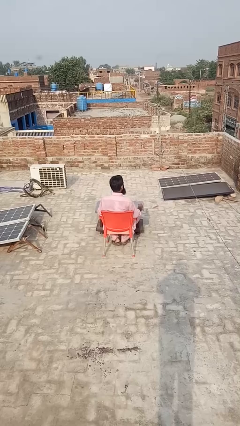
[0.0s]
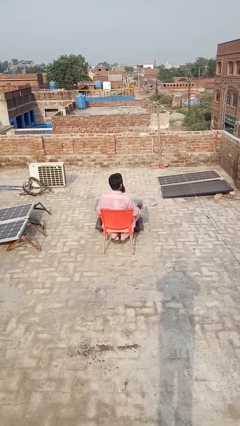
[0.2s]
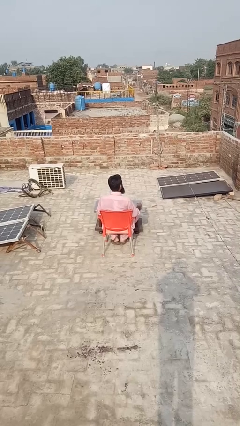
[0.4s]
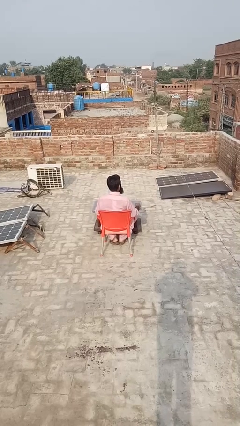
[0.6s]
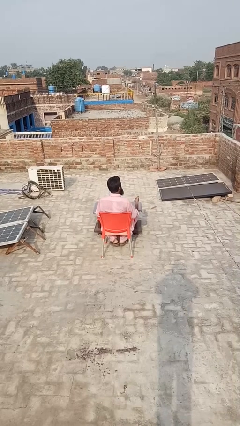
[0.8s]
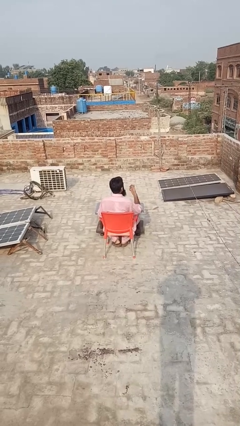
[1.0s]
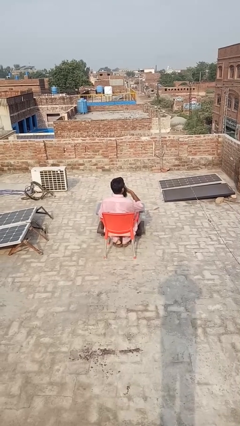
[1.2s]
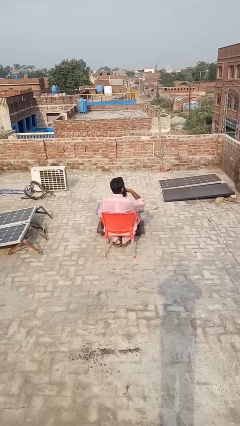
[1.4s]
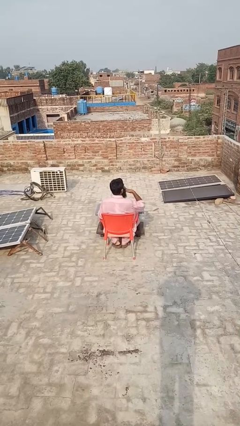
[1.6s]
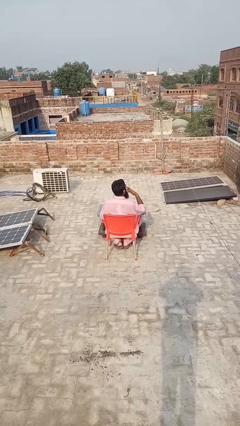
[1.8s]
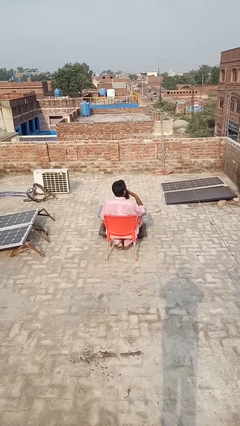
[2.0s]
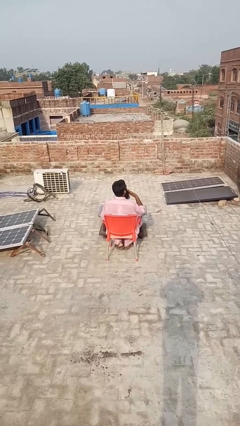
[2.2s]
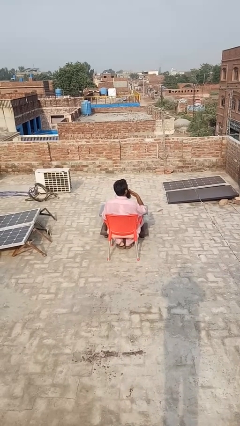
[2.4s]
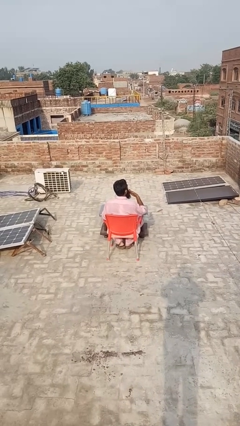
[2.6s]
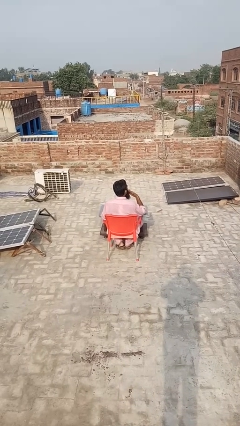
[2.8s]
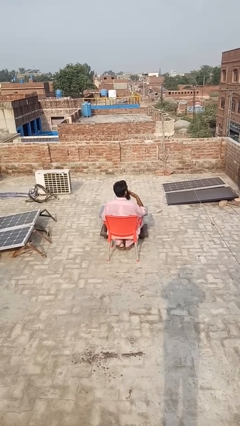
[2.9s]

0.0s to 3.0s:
person licks fingers

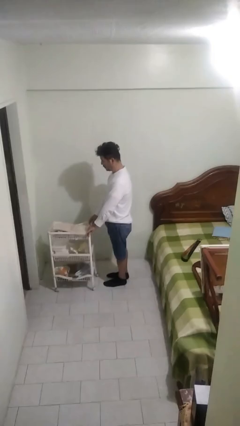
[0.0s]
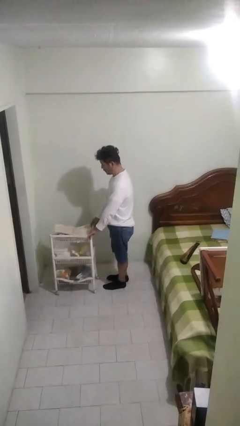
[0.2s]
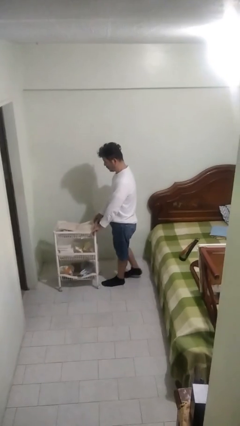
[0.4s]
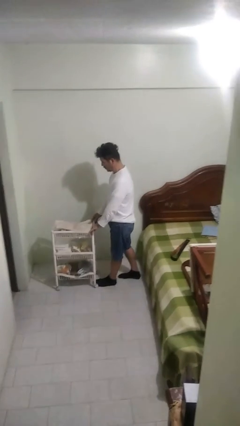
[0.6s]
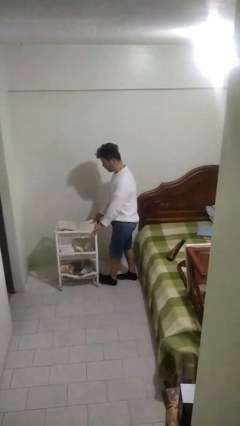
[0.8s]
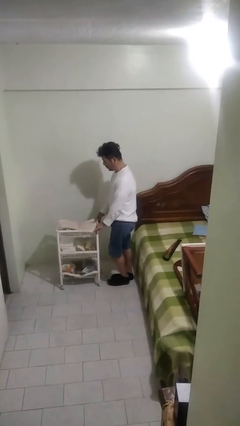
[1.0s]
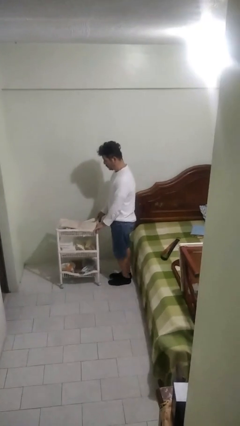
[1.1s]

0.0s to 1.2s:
person pulls wheeled cart

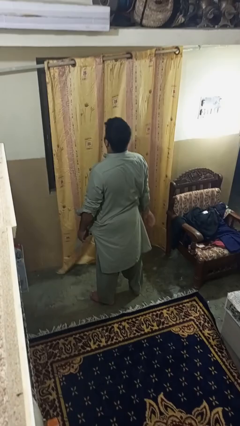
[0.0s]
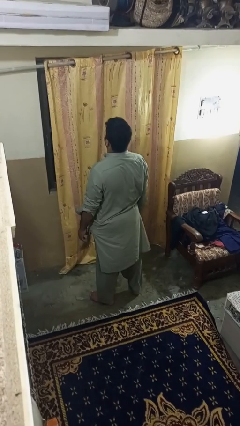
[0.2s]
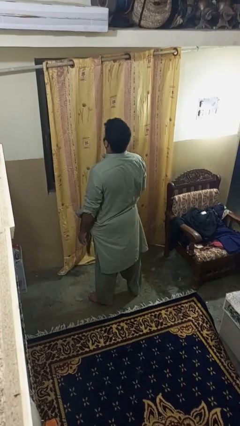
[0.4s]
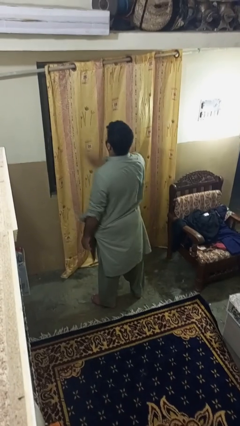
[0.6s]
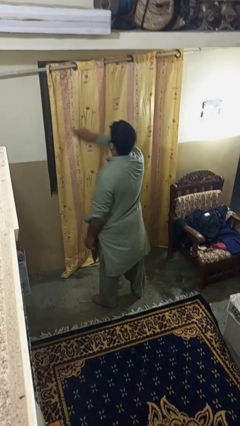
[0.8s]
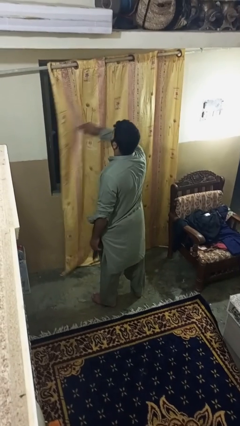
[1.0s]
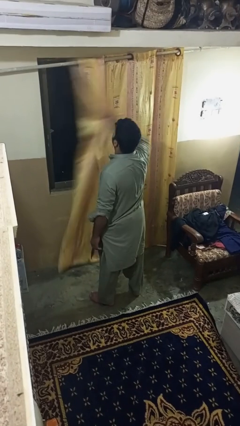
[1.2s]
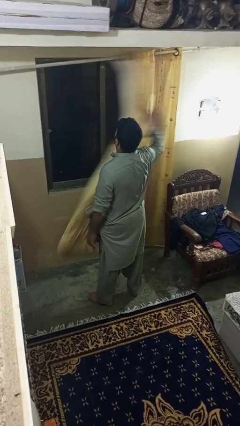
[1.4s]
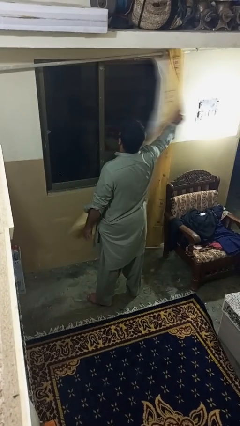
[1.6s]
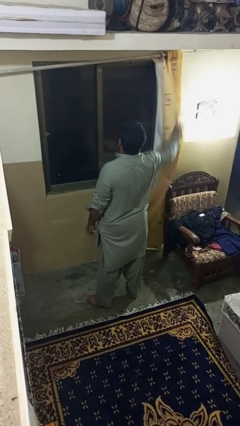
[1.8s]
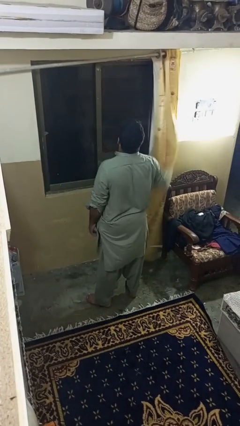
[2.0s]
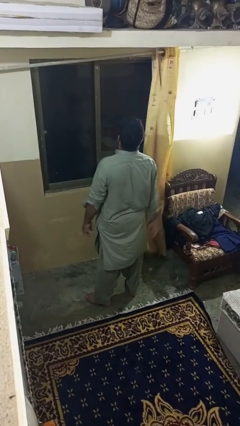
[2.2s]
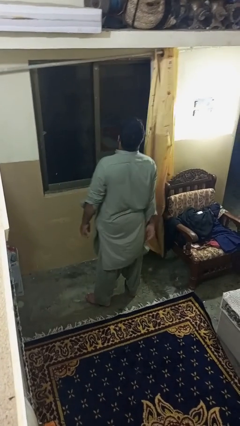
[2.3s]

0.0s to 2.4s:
person opens curtains

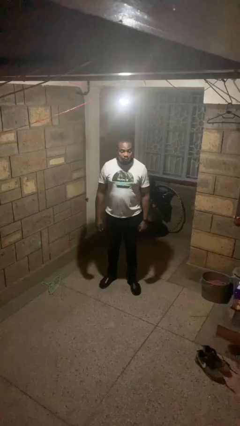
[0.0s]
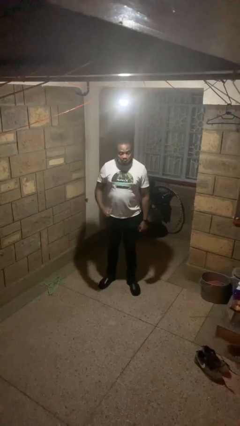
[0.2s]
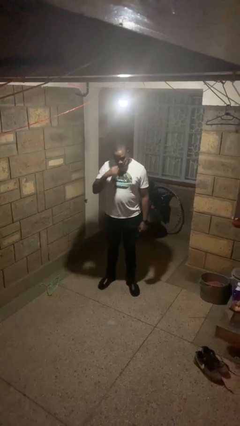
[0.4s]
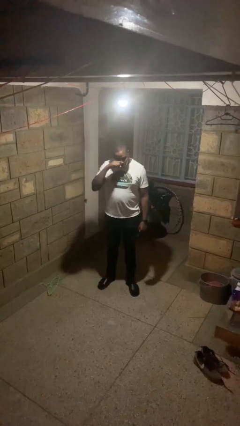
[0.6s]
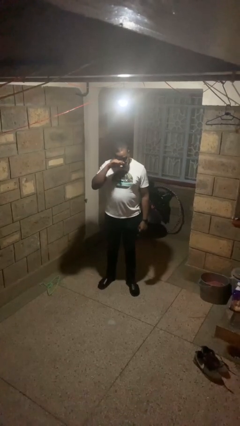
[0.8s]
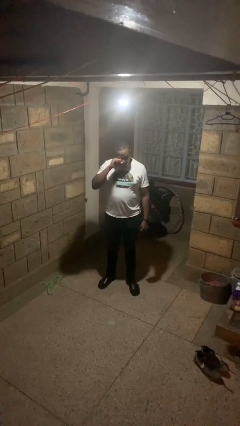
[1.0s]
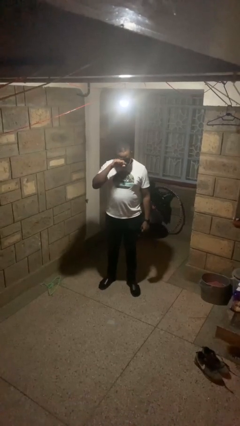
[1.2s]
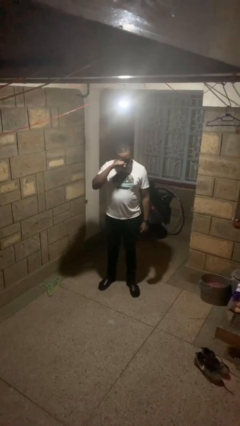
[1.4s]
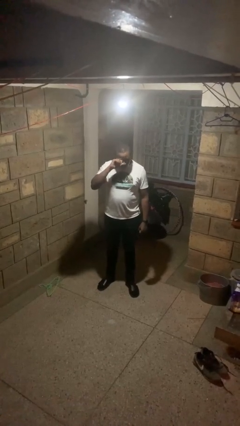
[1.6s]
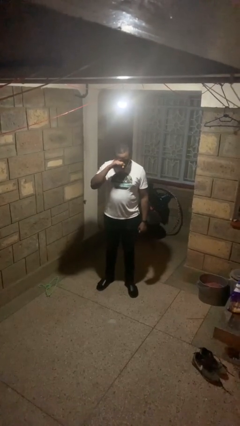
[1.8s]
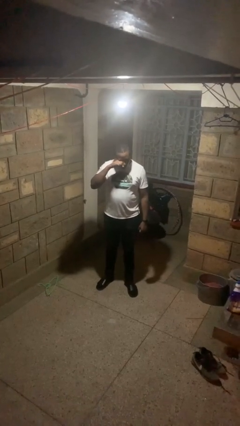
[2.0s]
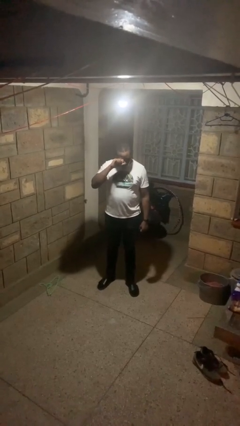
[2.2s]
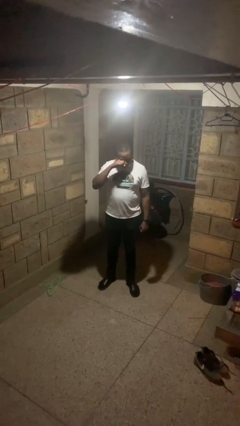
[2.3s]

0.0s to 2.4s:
person rubs eyes

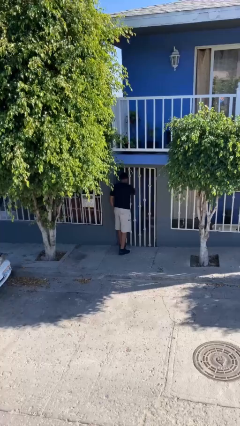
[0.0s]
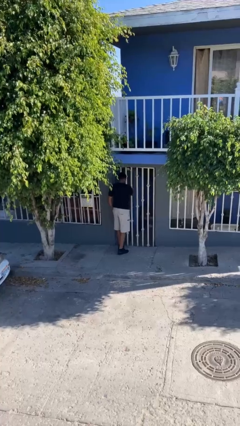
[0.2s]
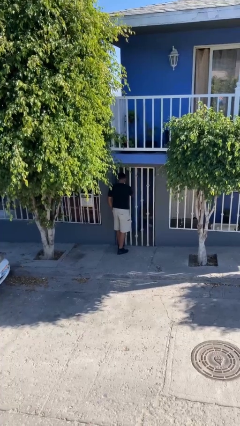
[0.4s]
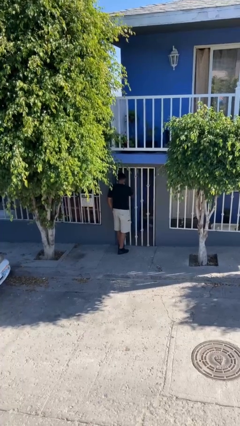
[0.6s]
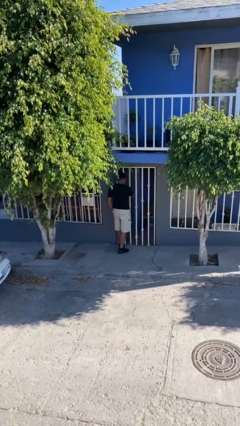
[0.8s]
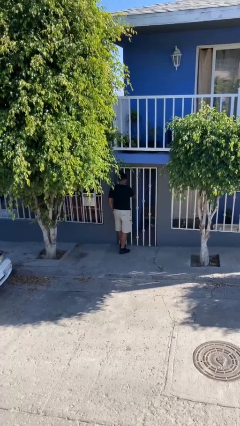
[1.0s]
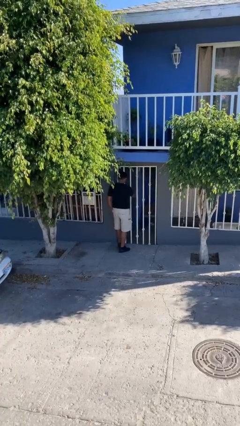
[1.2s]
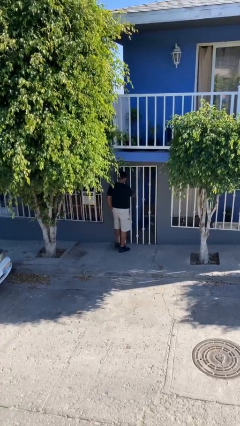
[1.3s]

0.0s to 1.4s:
person closes facility door

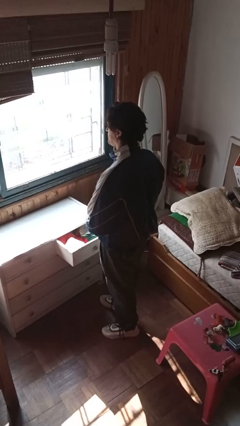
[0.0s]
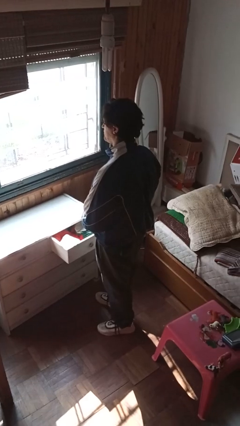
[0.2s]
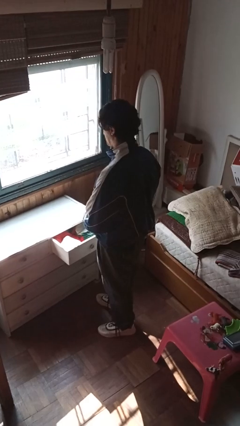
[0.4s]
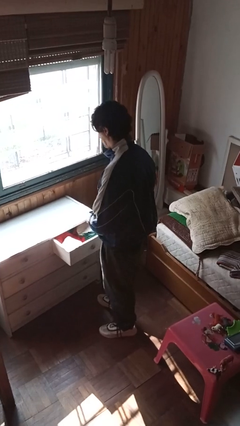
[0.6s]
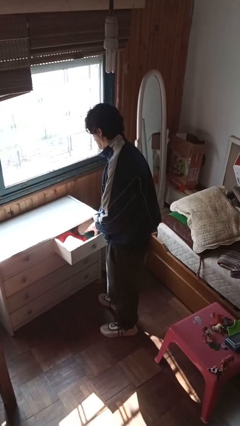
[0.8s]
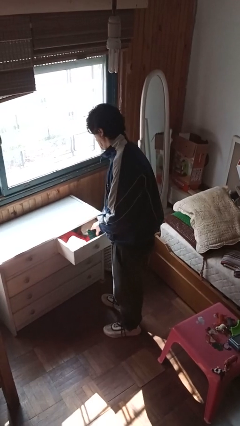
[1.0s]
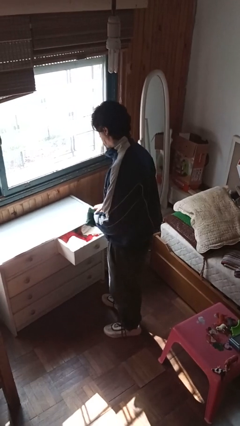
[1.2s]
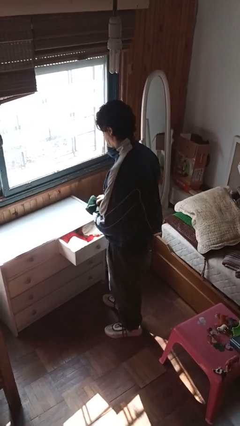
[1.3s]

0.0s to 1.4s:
person takes clothes from dresser

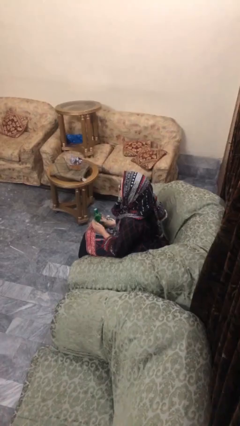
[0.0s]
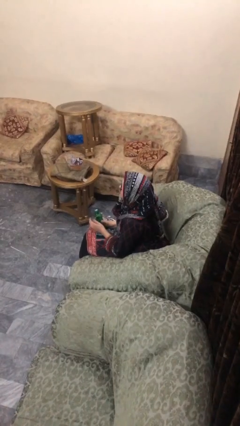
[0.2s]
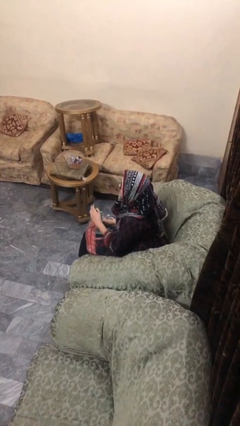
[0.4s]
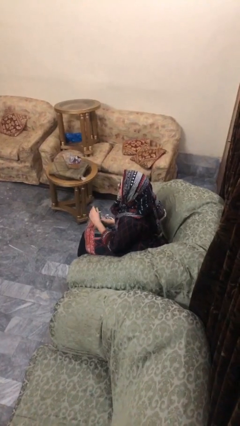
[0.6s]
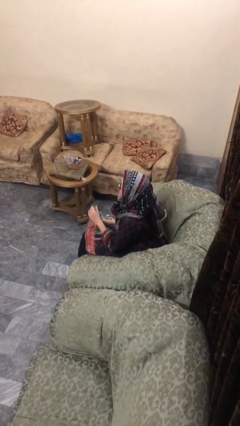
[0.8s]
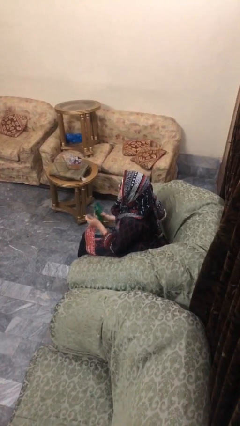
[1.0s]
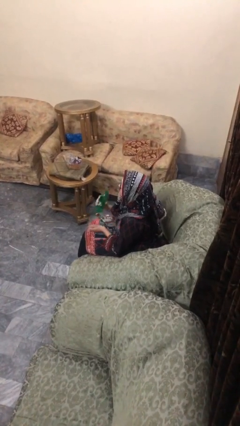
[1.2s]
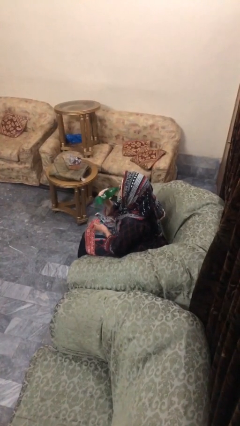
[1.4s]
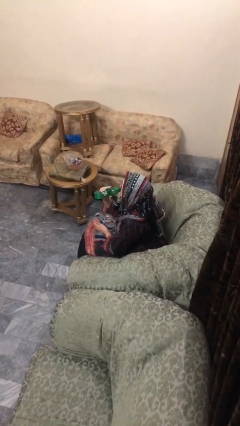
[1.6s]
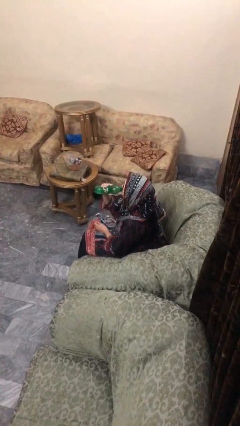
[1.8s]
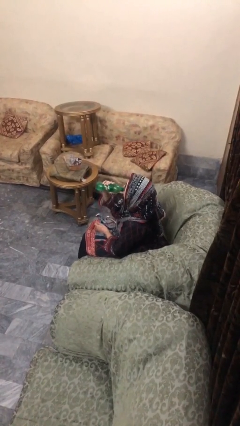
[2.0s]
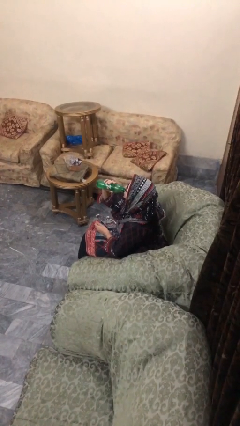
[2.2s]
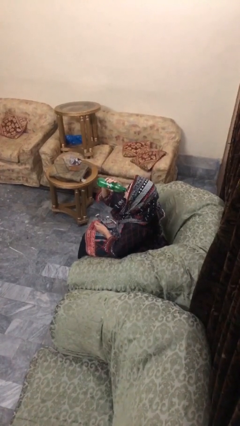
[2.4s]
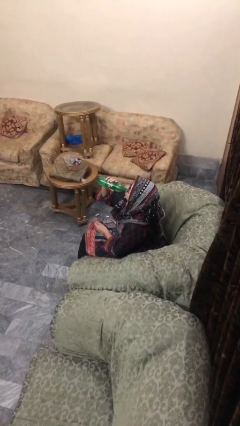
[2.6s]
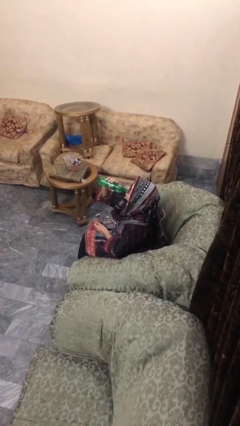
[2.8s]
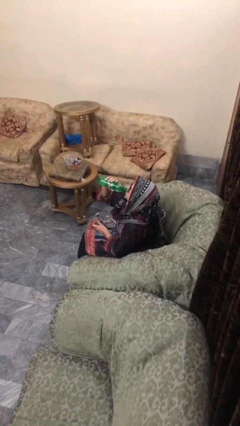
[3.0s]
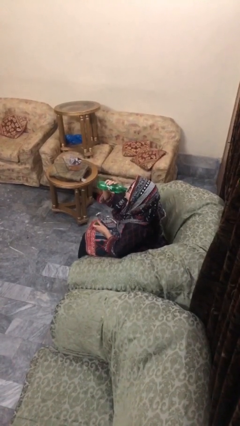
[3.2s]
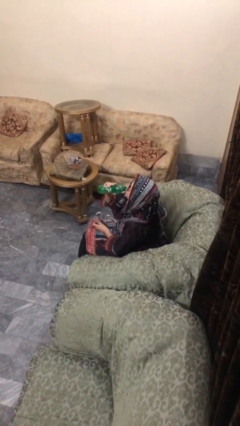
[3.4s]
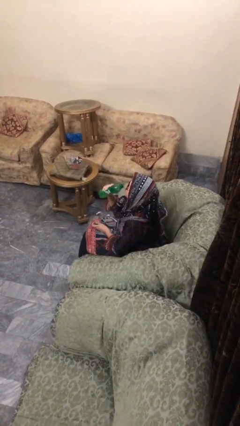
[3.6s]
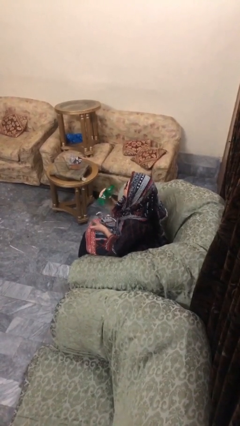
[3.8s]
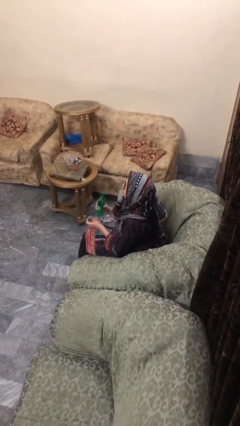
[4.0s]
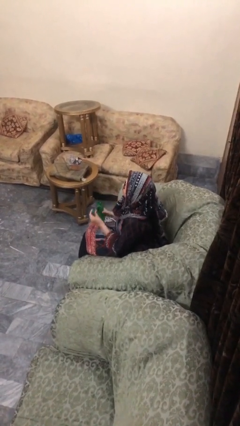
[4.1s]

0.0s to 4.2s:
person drinks from bottle

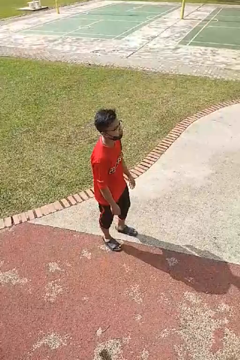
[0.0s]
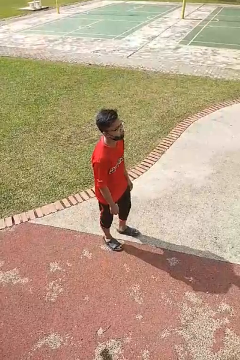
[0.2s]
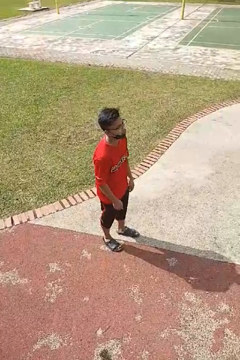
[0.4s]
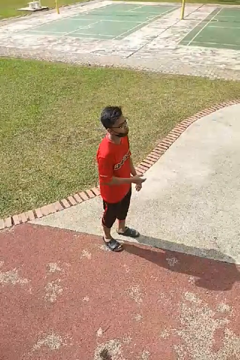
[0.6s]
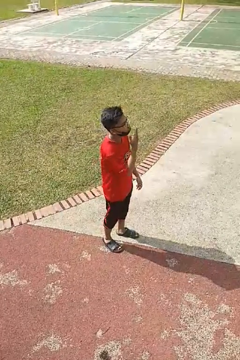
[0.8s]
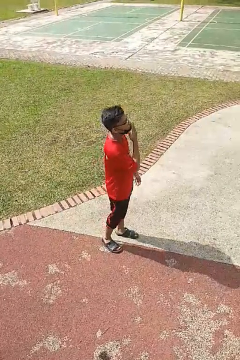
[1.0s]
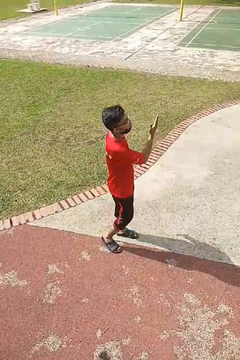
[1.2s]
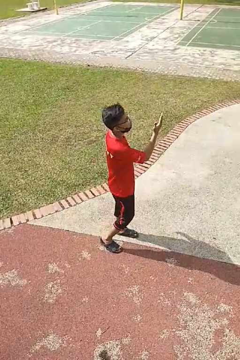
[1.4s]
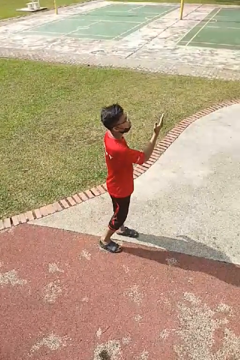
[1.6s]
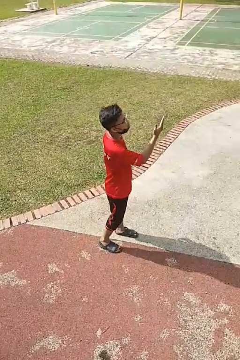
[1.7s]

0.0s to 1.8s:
person gestures blow kiss
